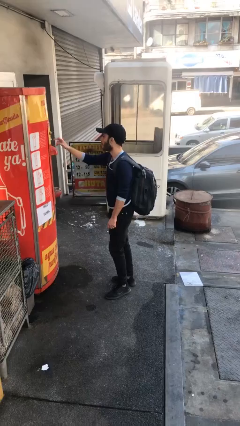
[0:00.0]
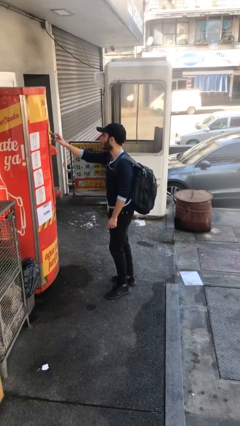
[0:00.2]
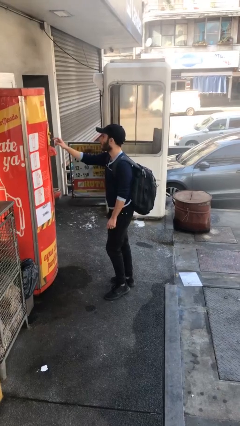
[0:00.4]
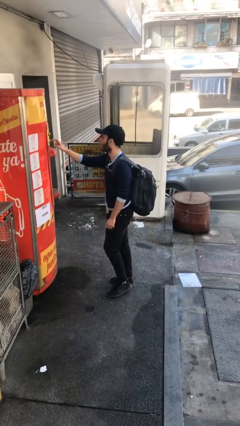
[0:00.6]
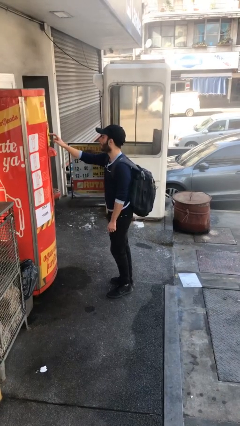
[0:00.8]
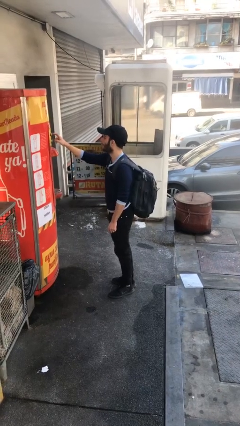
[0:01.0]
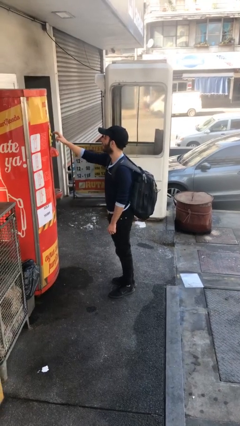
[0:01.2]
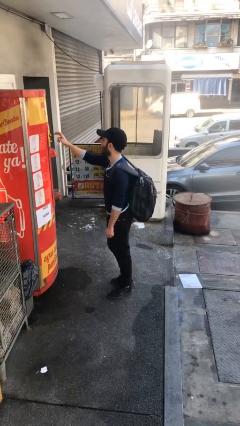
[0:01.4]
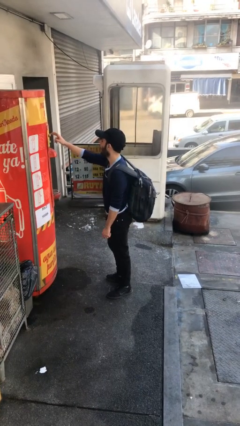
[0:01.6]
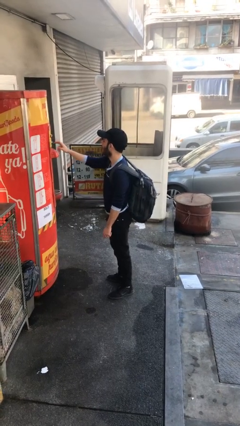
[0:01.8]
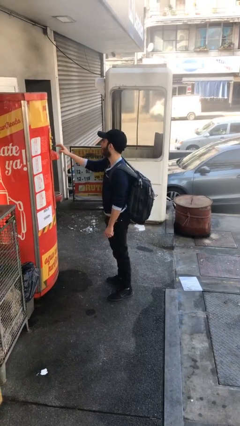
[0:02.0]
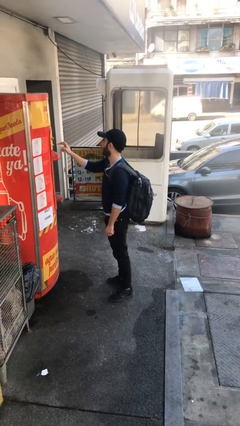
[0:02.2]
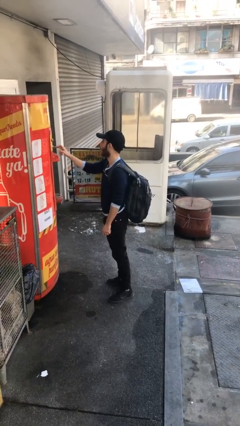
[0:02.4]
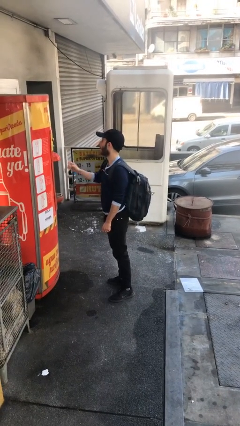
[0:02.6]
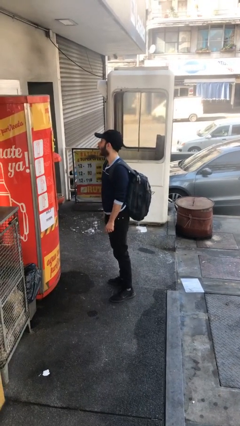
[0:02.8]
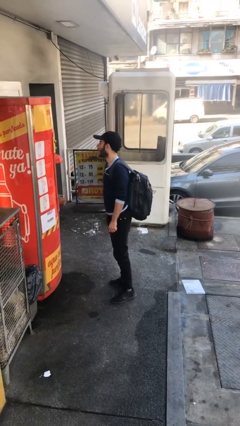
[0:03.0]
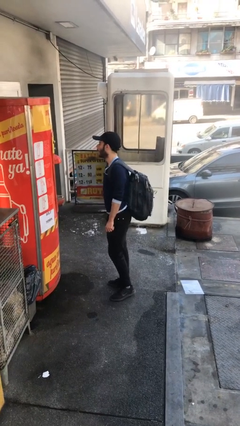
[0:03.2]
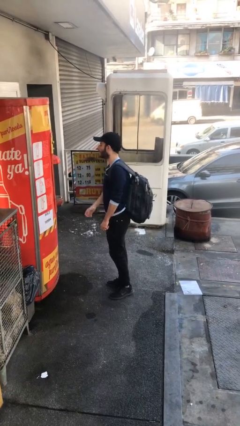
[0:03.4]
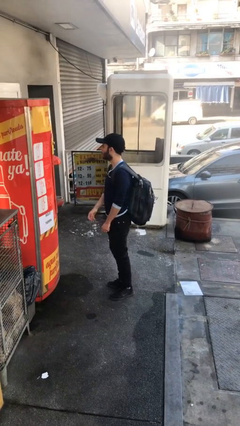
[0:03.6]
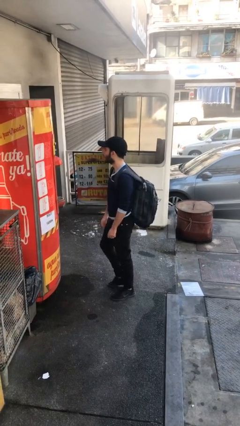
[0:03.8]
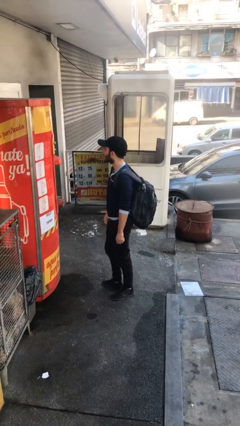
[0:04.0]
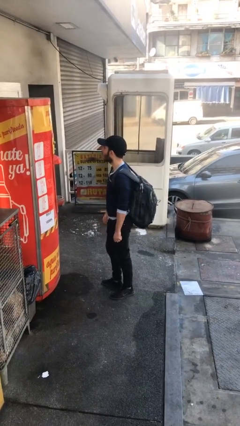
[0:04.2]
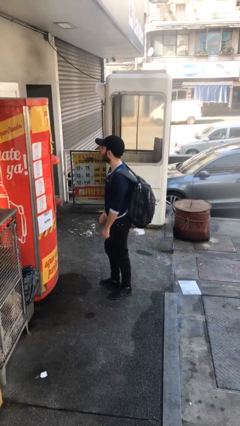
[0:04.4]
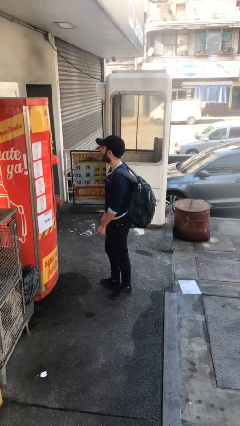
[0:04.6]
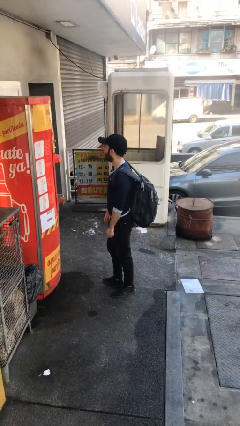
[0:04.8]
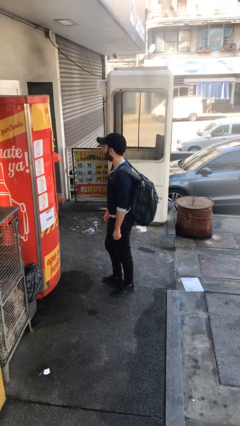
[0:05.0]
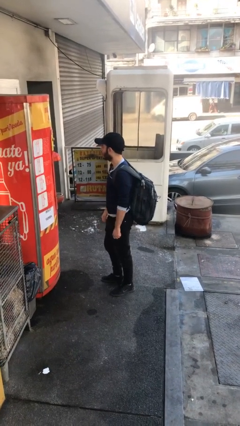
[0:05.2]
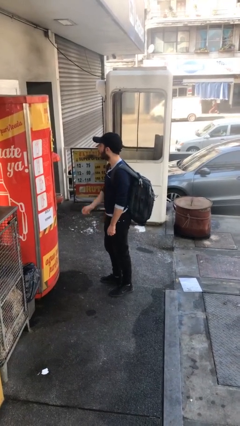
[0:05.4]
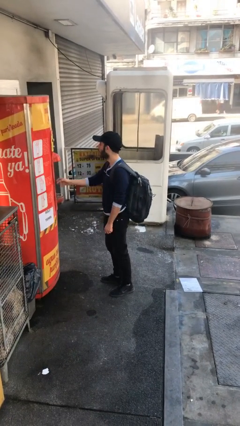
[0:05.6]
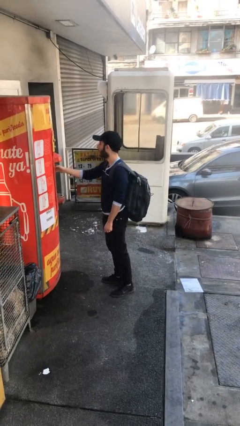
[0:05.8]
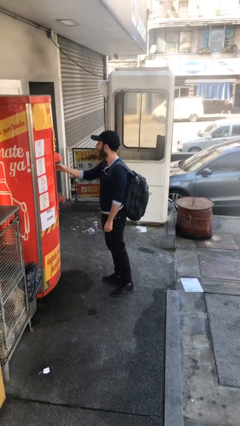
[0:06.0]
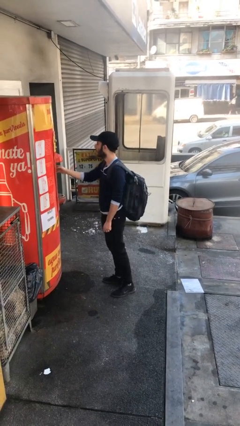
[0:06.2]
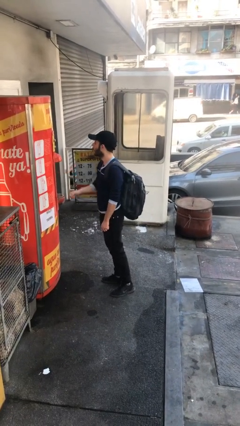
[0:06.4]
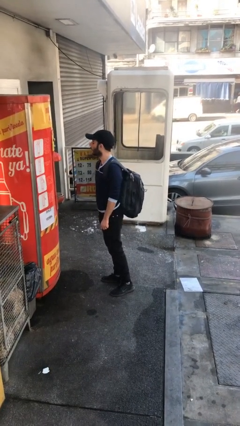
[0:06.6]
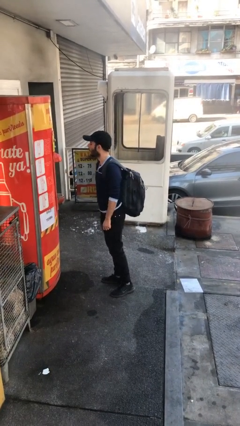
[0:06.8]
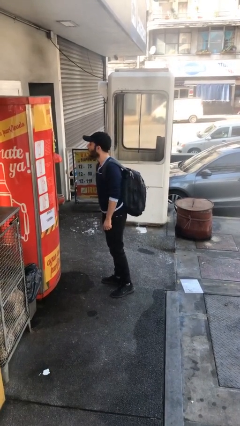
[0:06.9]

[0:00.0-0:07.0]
person purchases from machine

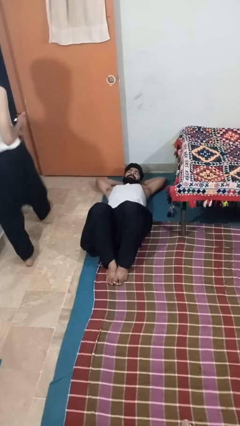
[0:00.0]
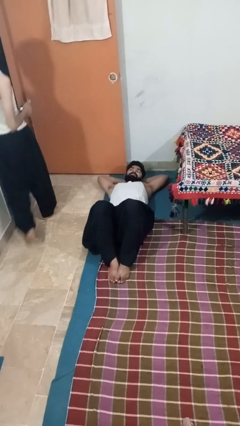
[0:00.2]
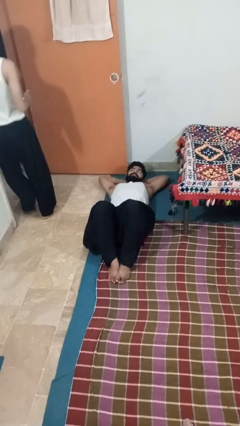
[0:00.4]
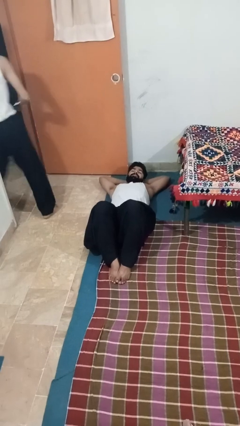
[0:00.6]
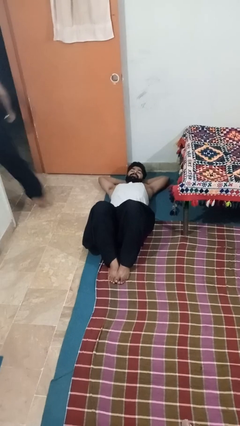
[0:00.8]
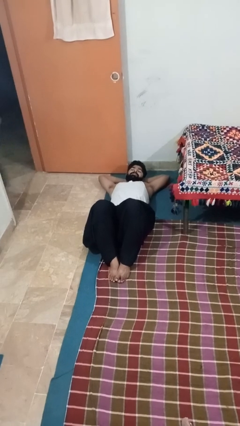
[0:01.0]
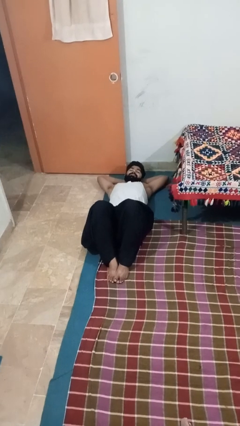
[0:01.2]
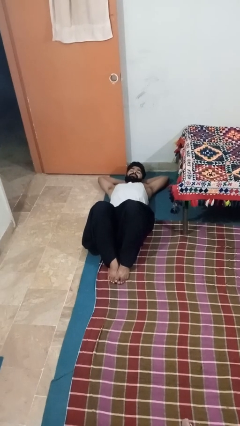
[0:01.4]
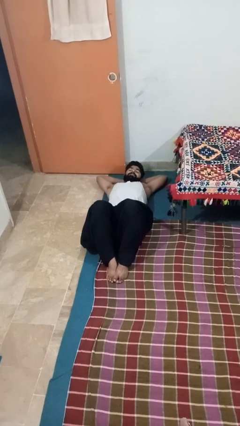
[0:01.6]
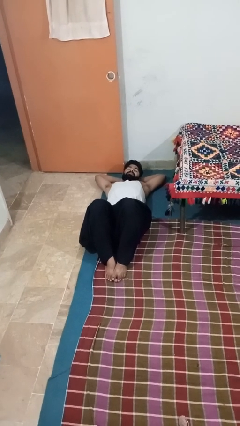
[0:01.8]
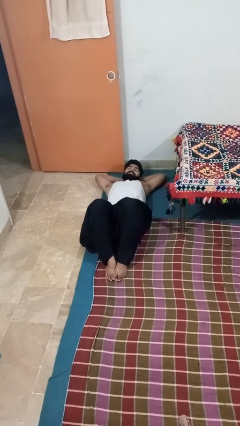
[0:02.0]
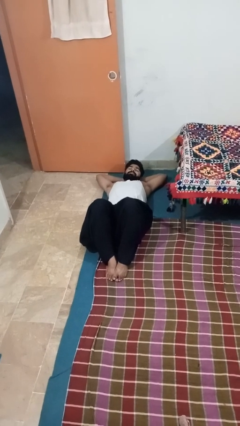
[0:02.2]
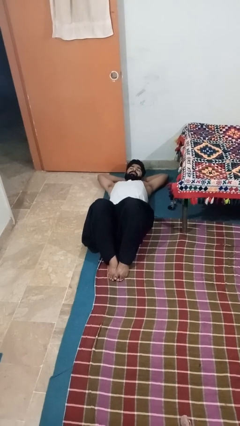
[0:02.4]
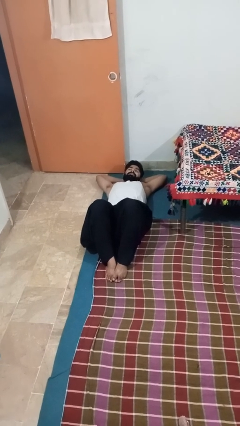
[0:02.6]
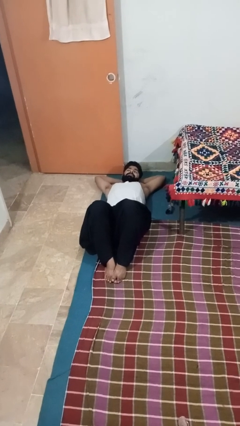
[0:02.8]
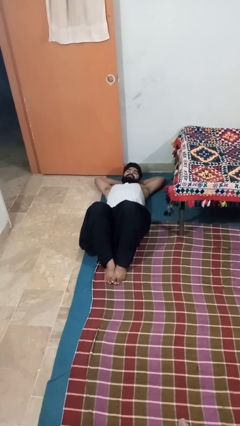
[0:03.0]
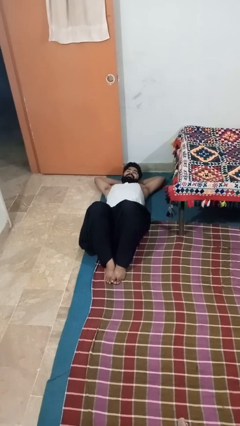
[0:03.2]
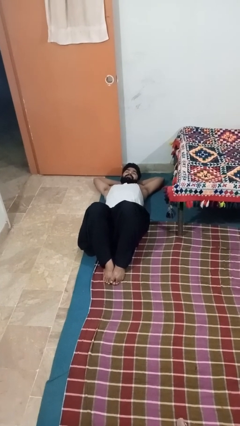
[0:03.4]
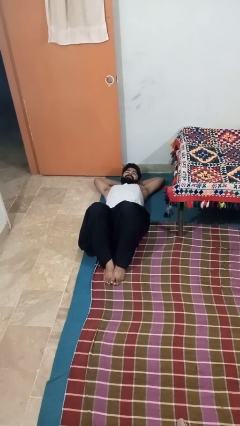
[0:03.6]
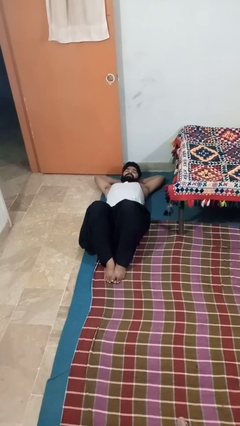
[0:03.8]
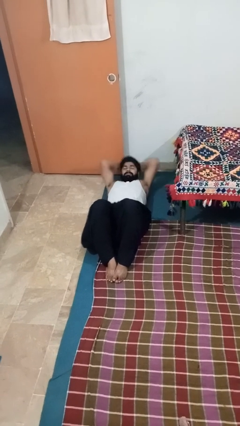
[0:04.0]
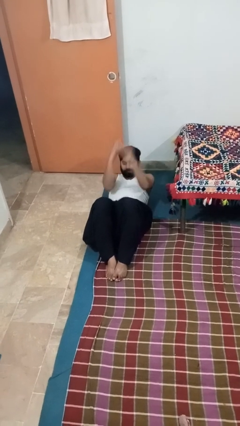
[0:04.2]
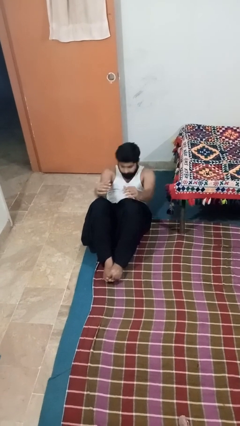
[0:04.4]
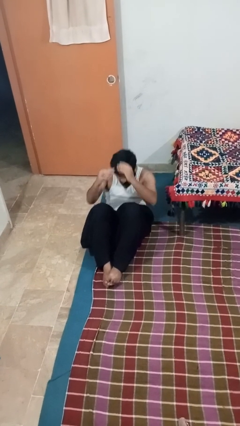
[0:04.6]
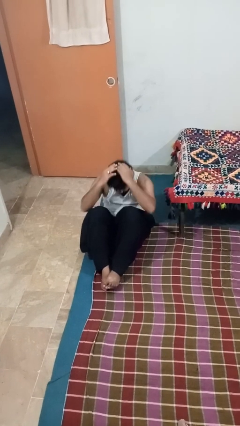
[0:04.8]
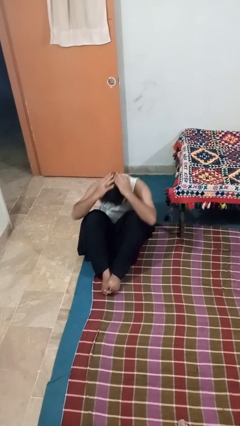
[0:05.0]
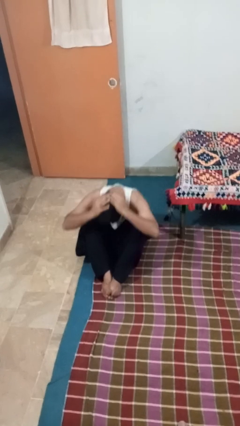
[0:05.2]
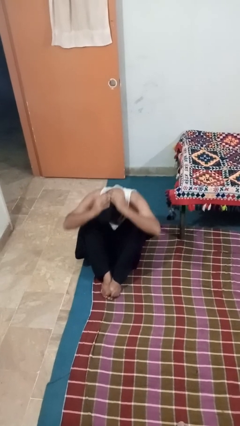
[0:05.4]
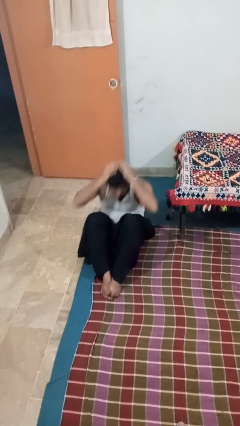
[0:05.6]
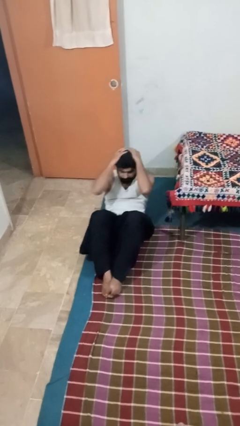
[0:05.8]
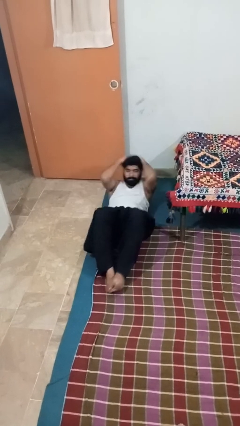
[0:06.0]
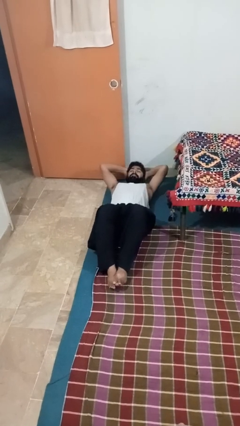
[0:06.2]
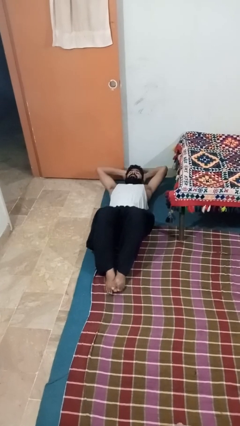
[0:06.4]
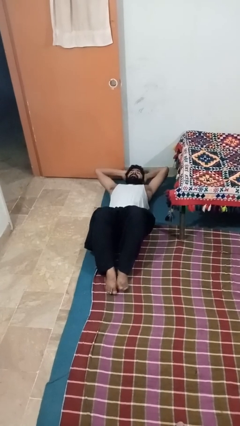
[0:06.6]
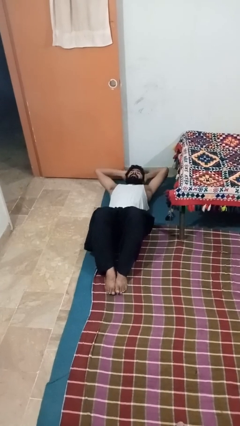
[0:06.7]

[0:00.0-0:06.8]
person exercises with situp

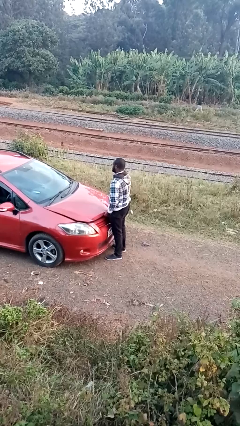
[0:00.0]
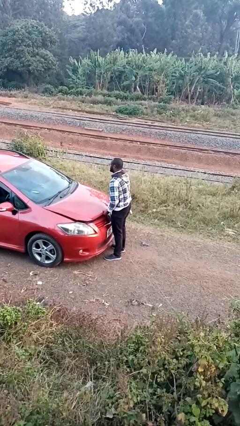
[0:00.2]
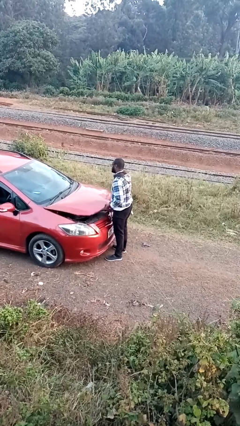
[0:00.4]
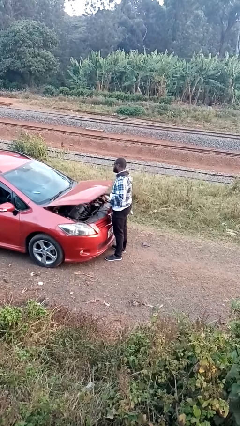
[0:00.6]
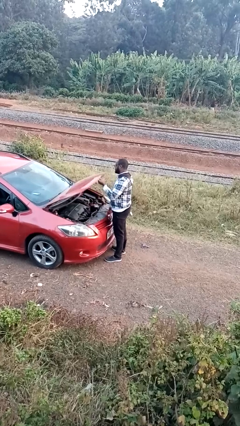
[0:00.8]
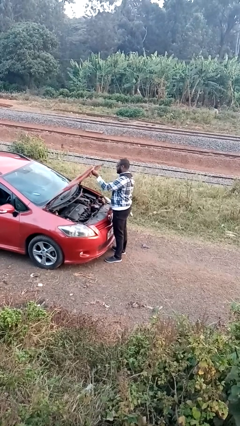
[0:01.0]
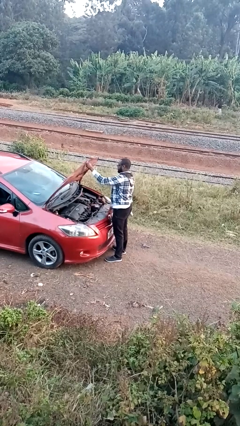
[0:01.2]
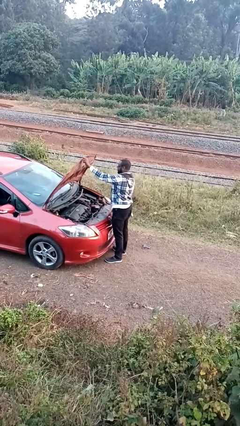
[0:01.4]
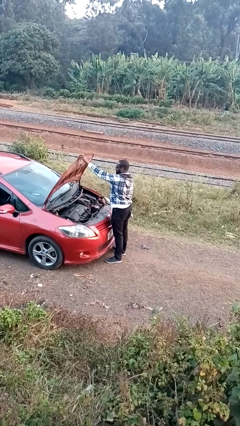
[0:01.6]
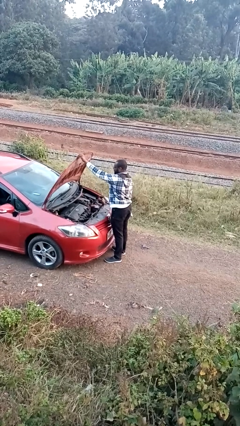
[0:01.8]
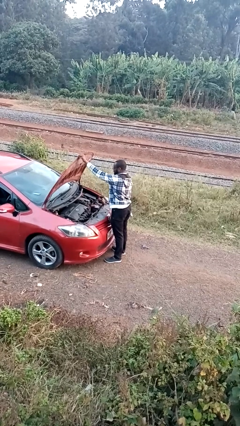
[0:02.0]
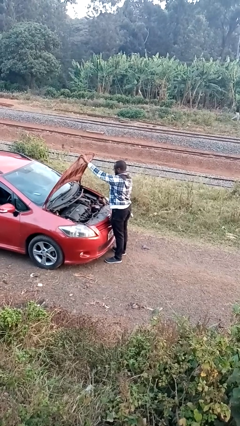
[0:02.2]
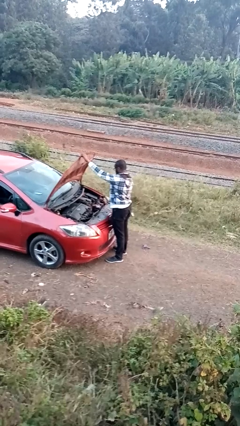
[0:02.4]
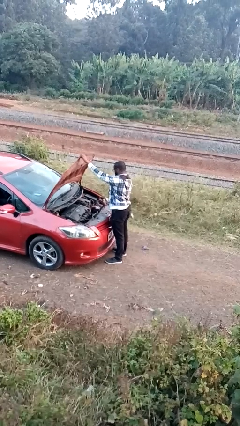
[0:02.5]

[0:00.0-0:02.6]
person opens car hood

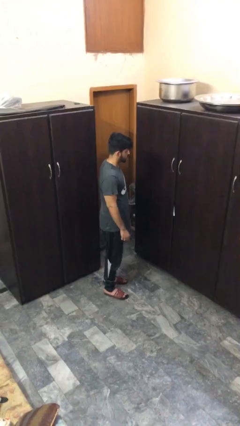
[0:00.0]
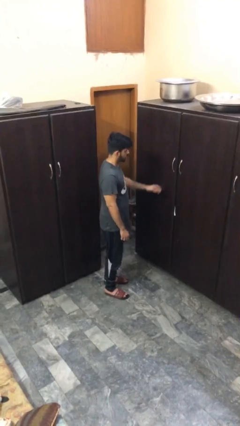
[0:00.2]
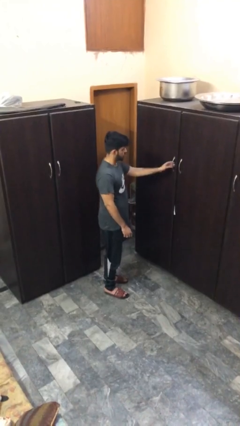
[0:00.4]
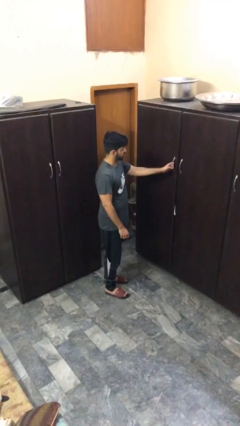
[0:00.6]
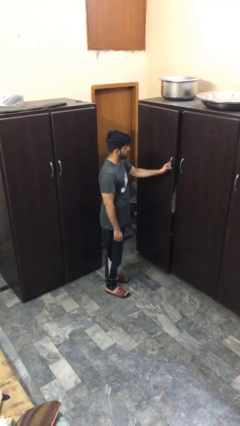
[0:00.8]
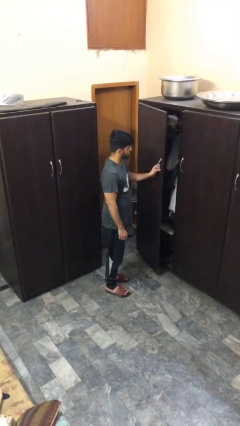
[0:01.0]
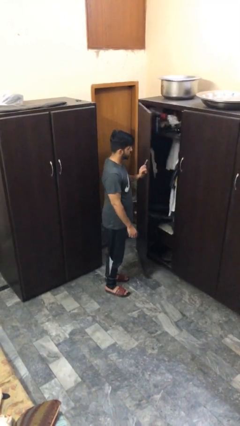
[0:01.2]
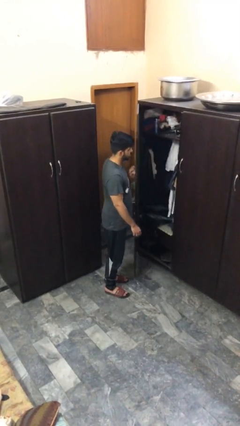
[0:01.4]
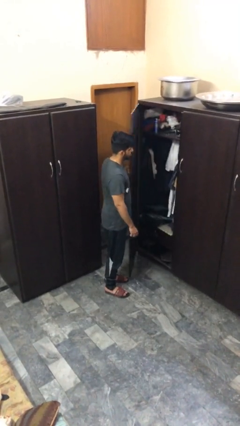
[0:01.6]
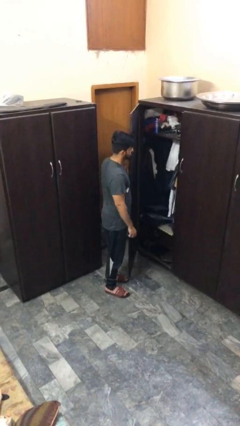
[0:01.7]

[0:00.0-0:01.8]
person opens dresser drawer
